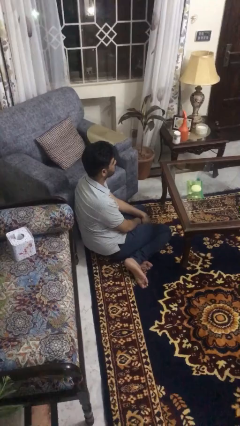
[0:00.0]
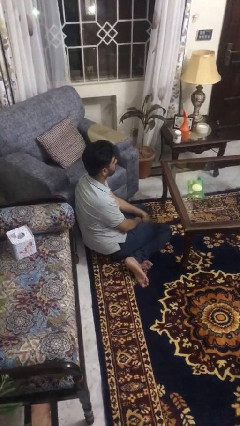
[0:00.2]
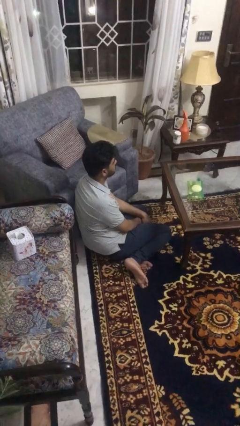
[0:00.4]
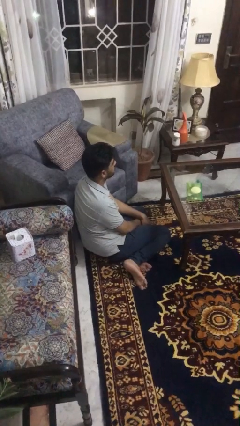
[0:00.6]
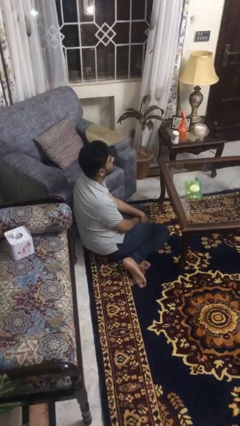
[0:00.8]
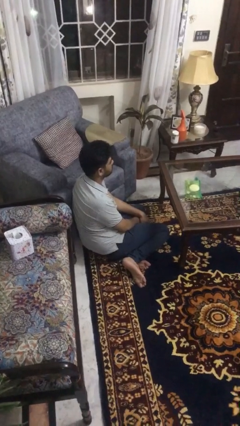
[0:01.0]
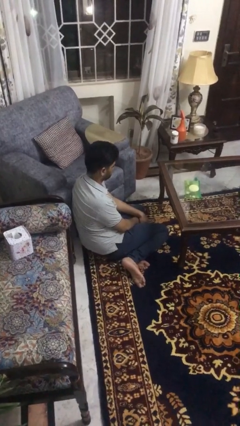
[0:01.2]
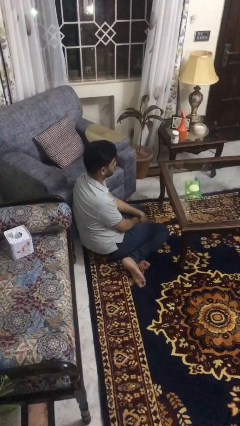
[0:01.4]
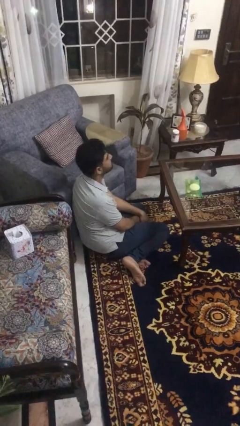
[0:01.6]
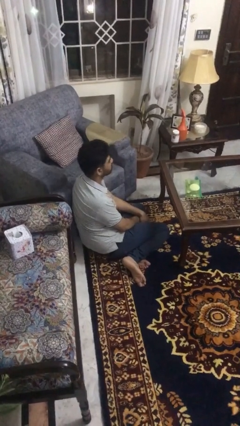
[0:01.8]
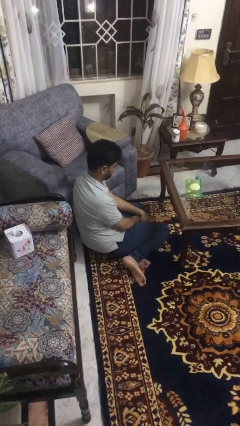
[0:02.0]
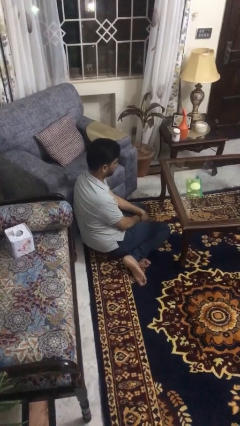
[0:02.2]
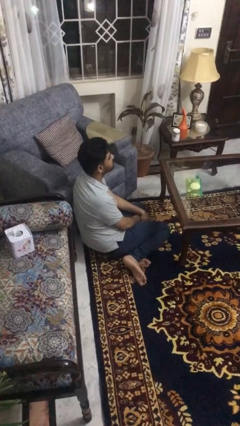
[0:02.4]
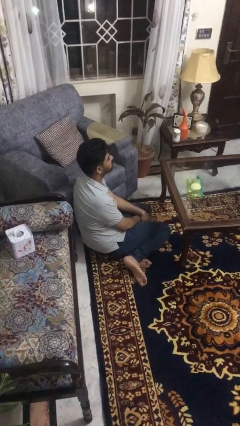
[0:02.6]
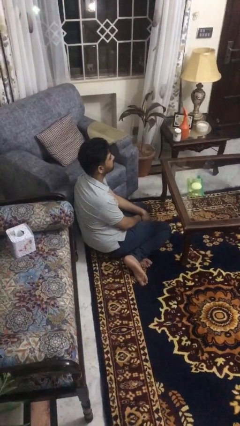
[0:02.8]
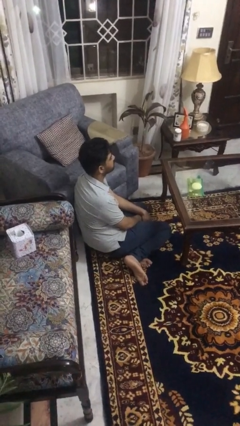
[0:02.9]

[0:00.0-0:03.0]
person nods head

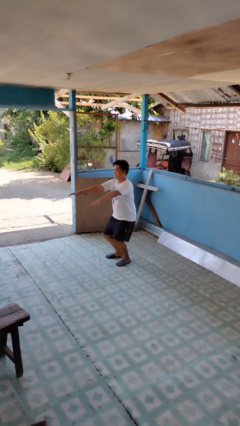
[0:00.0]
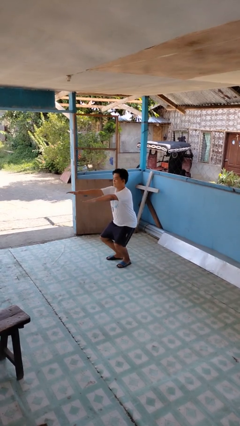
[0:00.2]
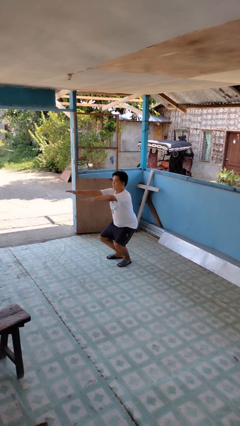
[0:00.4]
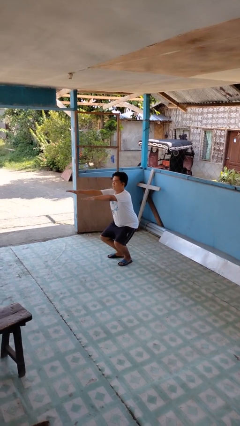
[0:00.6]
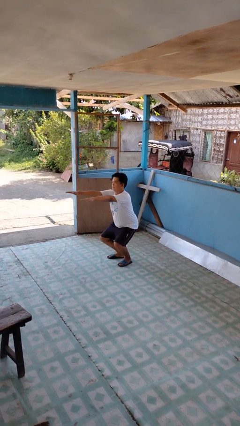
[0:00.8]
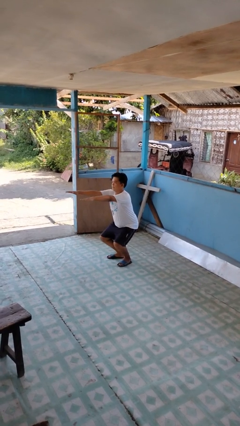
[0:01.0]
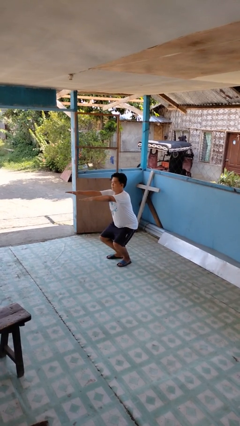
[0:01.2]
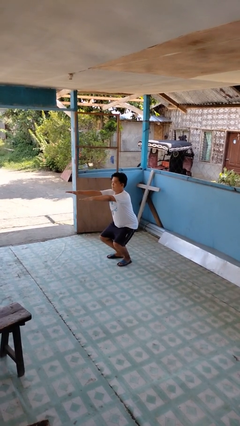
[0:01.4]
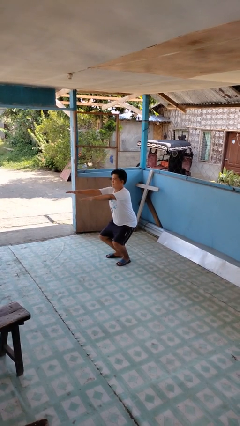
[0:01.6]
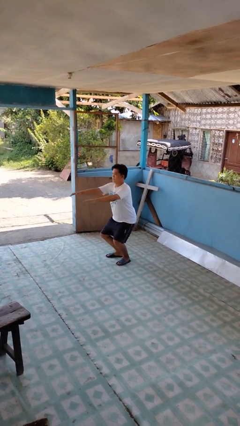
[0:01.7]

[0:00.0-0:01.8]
person squats

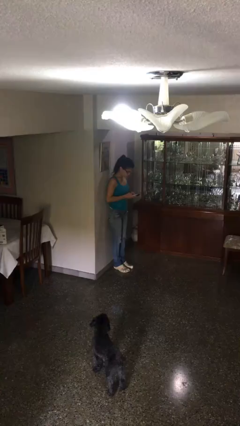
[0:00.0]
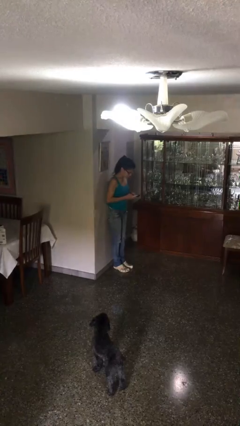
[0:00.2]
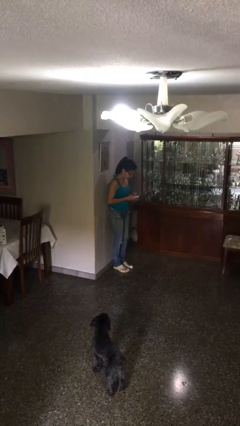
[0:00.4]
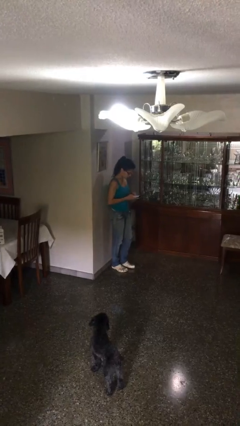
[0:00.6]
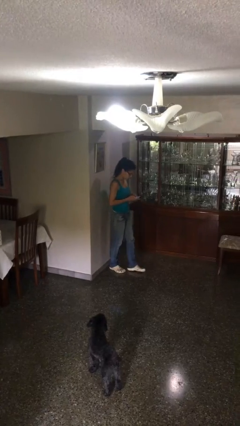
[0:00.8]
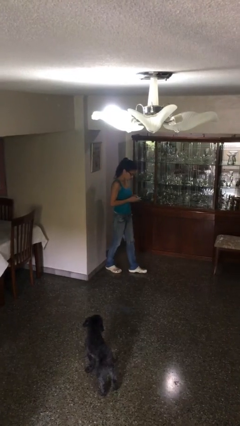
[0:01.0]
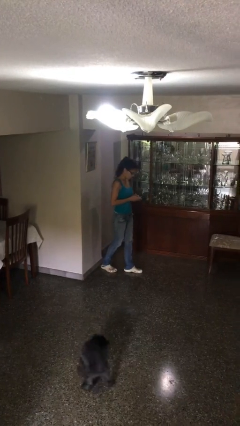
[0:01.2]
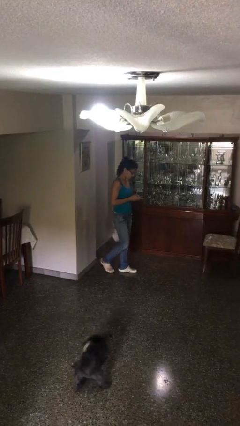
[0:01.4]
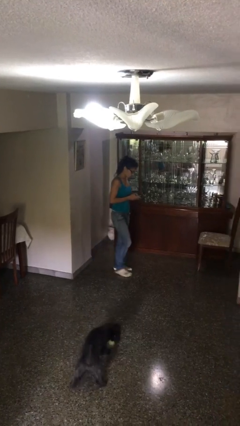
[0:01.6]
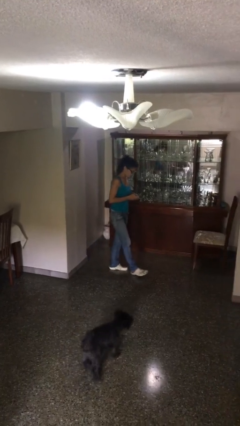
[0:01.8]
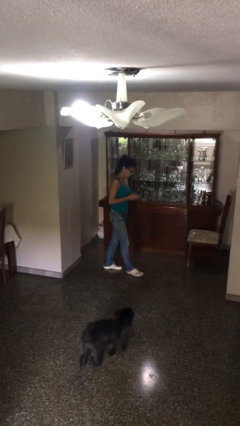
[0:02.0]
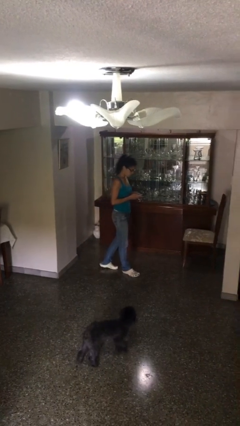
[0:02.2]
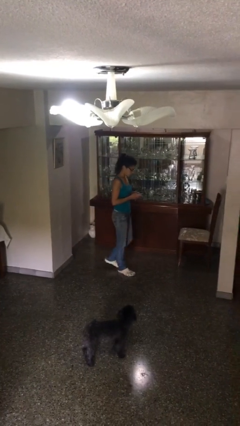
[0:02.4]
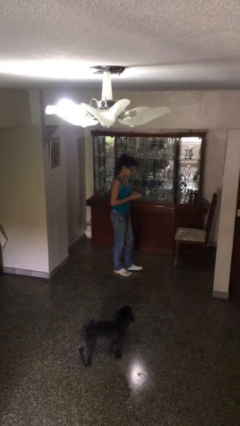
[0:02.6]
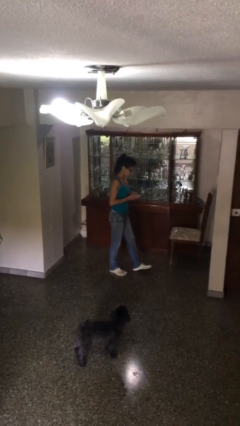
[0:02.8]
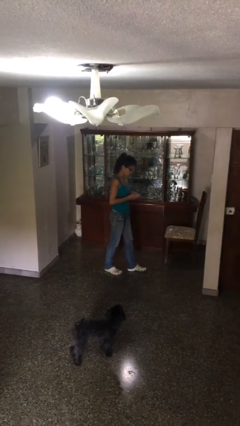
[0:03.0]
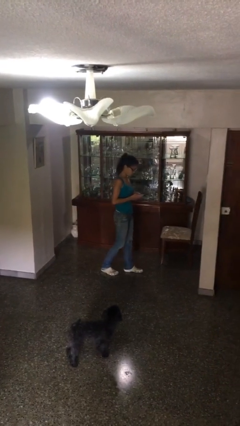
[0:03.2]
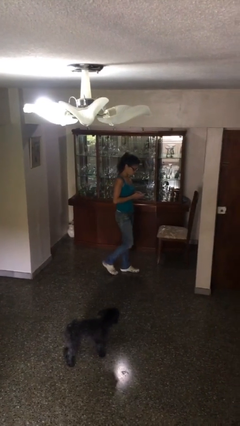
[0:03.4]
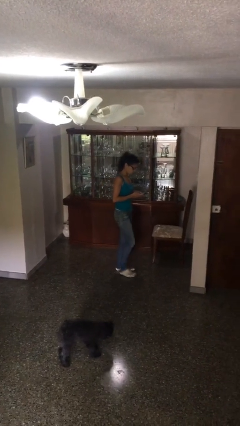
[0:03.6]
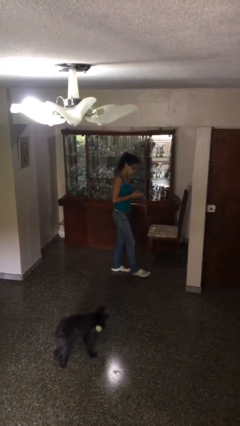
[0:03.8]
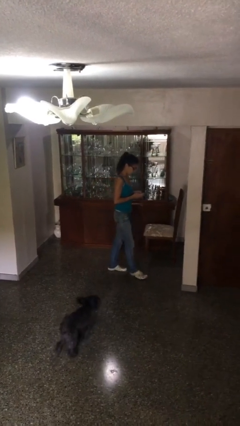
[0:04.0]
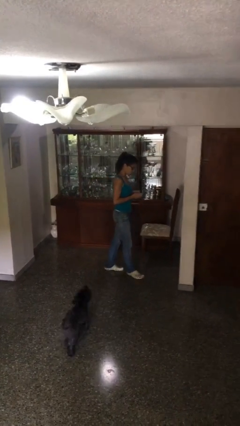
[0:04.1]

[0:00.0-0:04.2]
person texts on phone

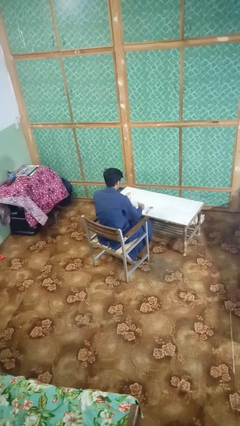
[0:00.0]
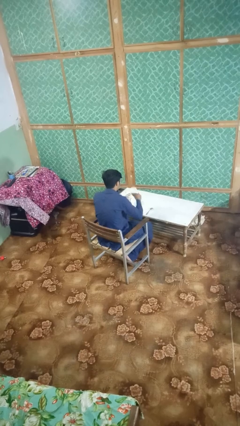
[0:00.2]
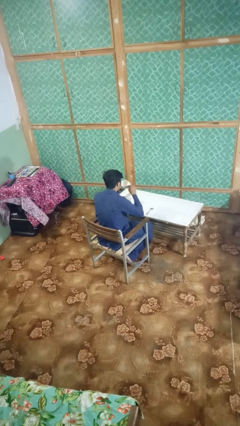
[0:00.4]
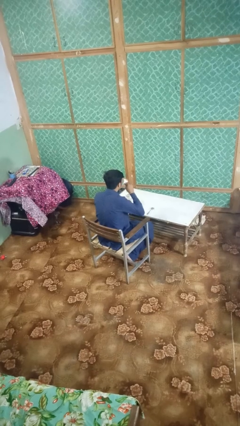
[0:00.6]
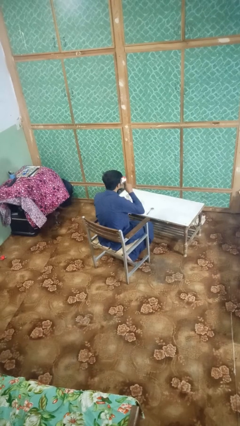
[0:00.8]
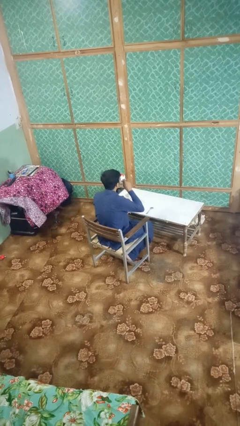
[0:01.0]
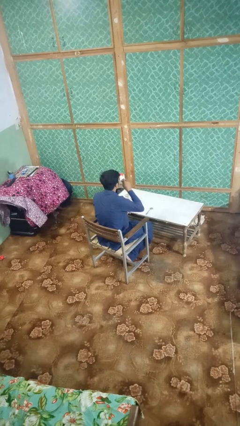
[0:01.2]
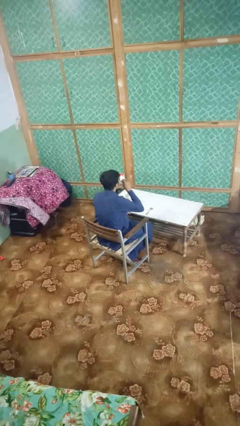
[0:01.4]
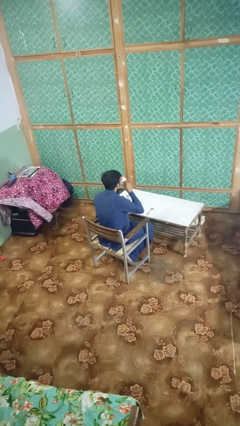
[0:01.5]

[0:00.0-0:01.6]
person drinks from mug

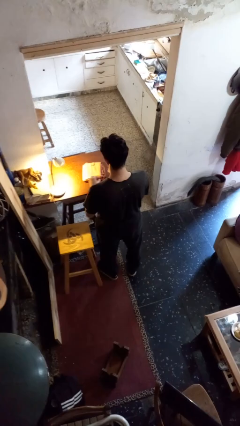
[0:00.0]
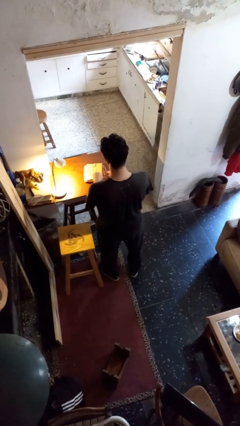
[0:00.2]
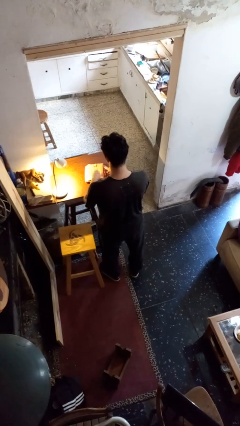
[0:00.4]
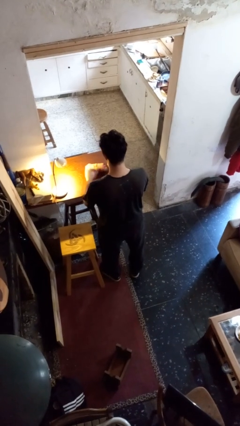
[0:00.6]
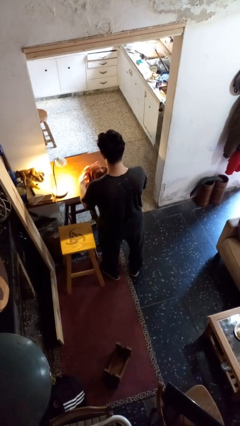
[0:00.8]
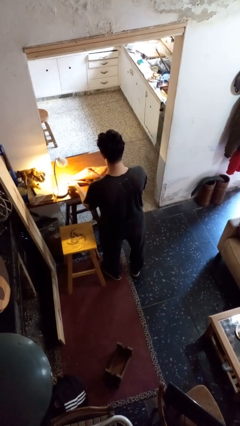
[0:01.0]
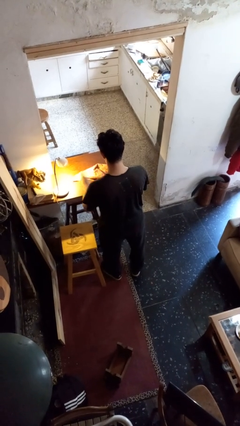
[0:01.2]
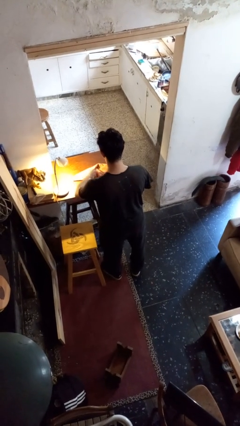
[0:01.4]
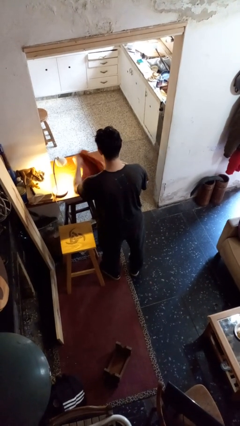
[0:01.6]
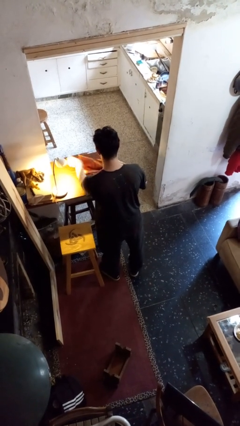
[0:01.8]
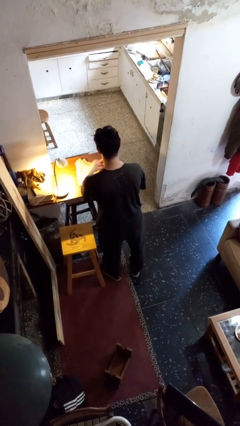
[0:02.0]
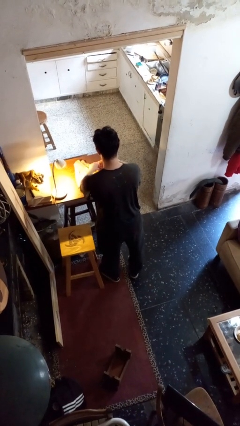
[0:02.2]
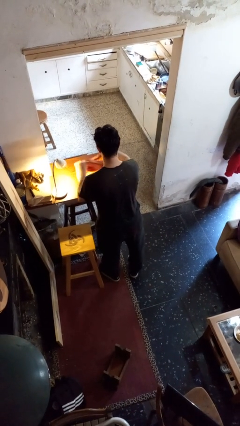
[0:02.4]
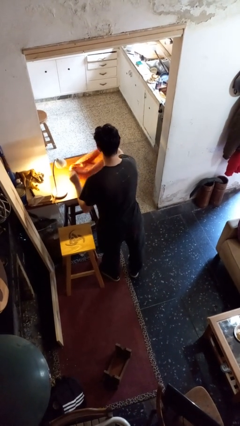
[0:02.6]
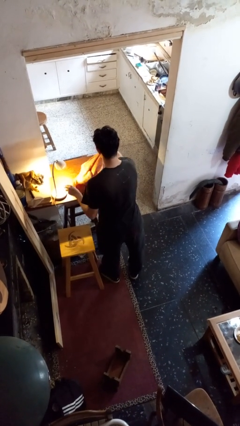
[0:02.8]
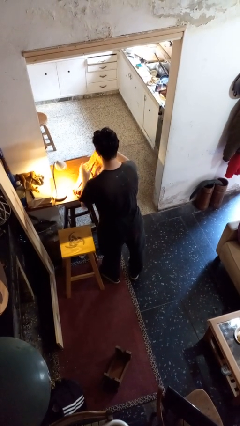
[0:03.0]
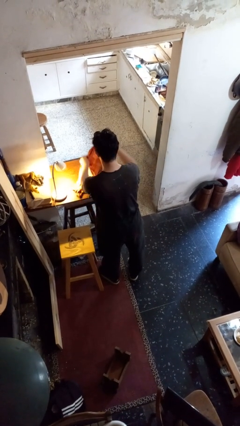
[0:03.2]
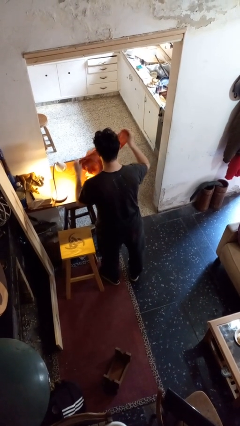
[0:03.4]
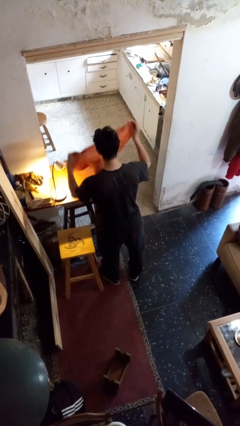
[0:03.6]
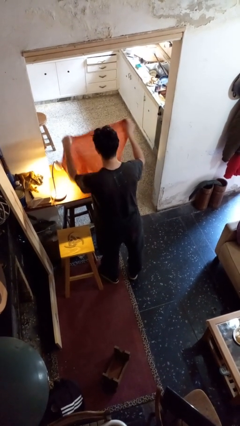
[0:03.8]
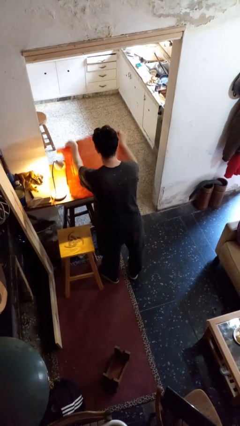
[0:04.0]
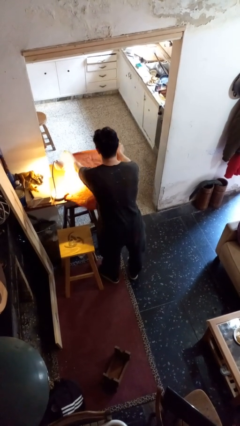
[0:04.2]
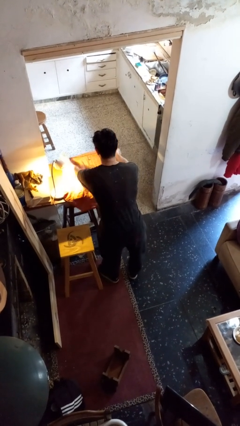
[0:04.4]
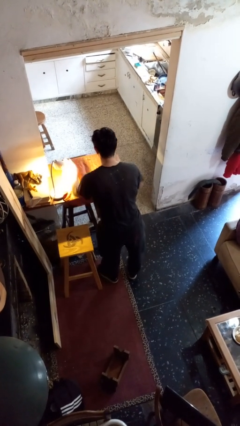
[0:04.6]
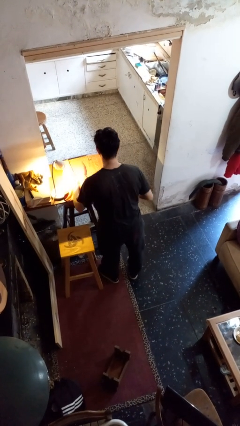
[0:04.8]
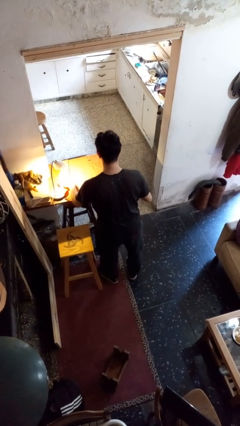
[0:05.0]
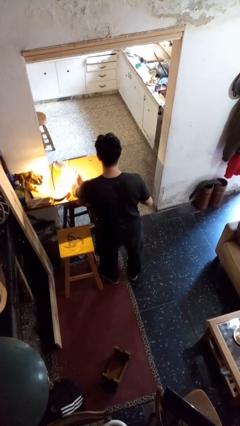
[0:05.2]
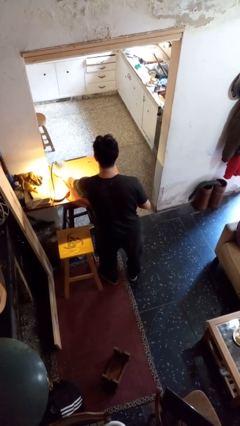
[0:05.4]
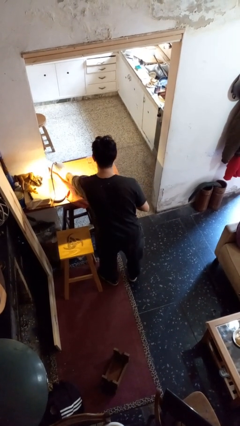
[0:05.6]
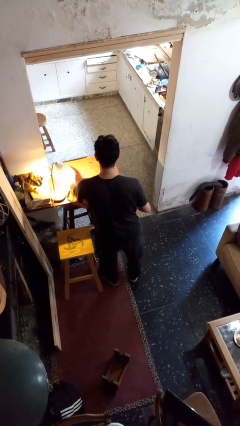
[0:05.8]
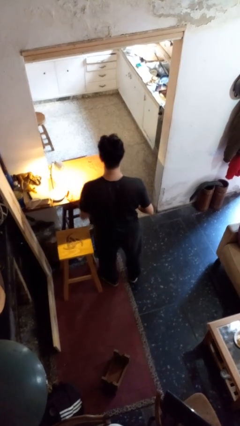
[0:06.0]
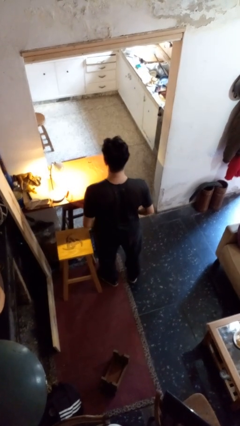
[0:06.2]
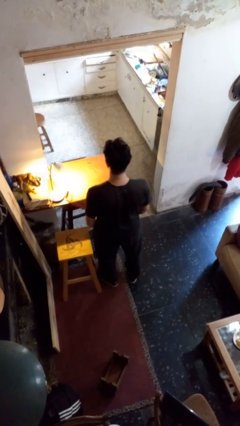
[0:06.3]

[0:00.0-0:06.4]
person spreads tablecloth

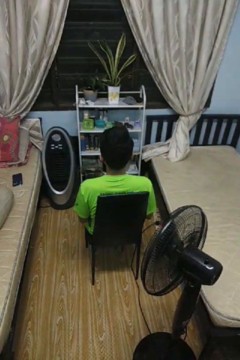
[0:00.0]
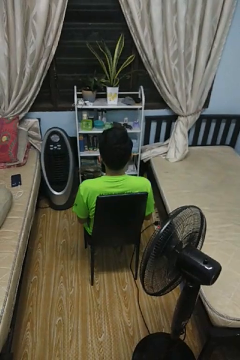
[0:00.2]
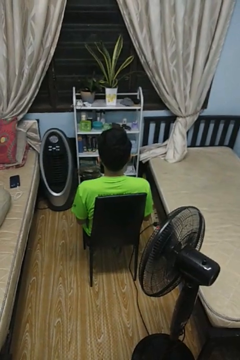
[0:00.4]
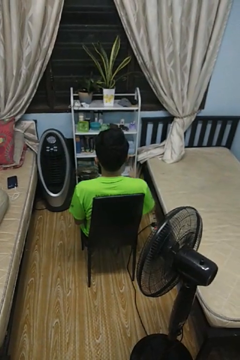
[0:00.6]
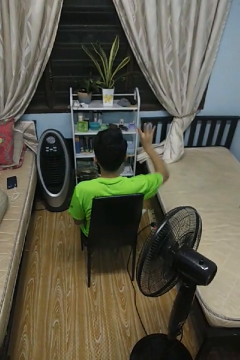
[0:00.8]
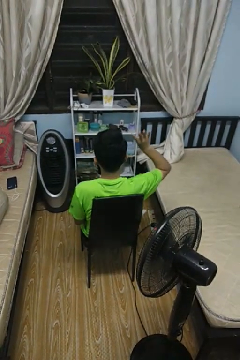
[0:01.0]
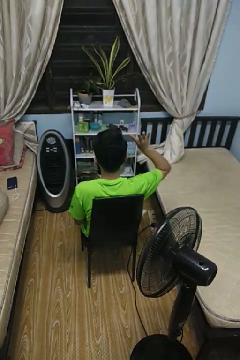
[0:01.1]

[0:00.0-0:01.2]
person gestures number four
